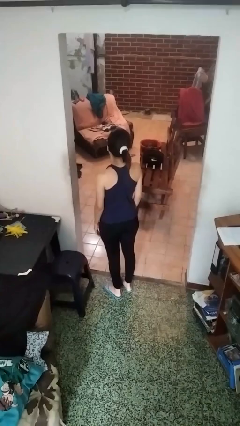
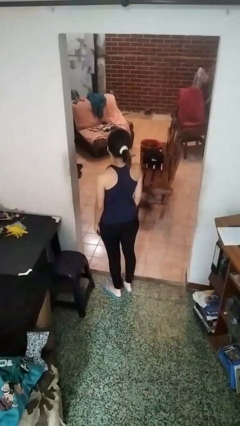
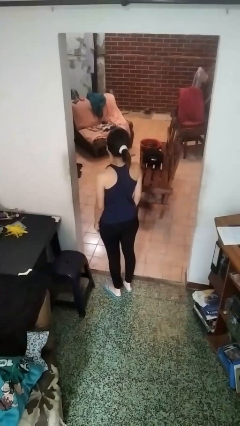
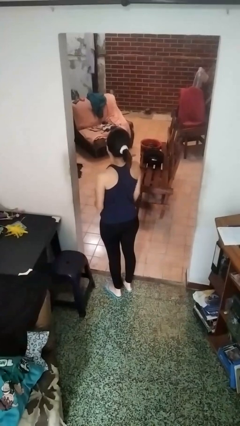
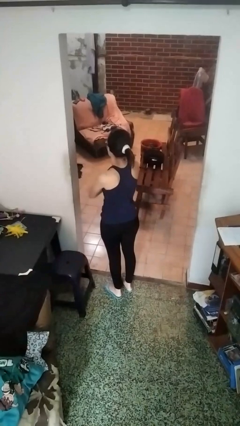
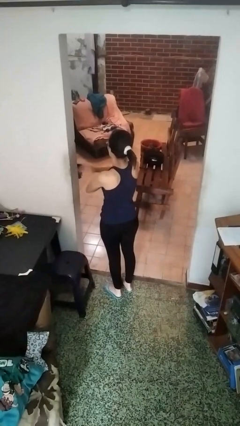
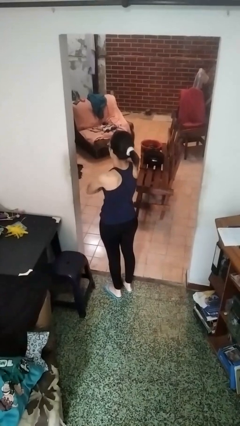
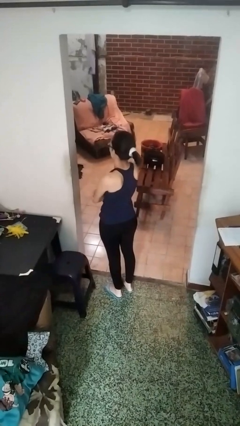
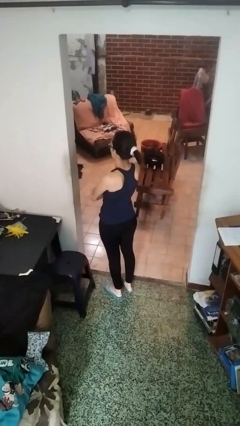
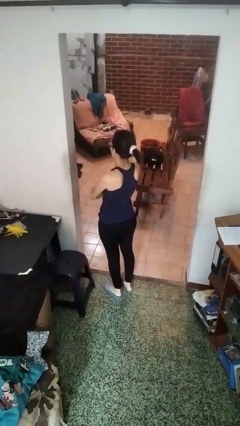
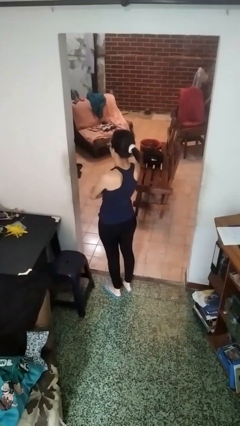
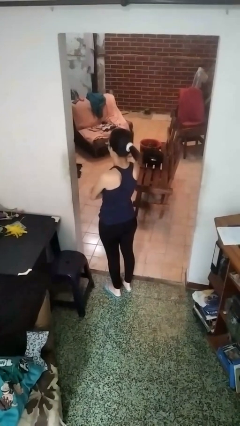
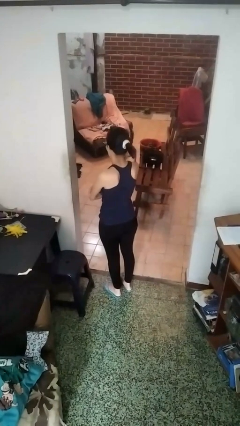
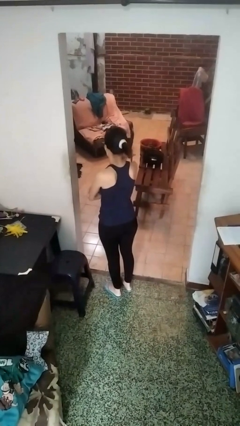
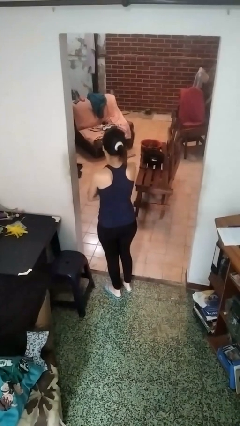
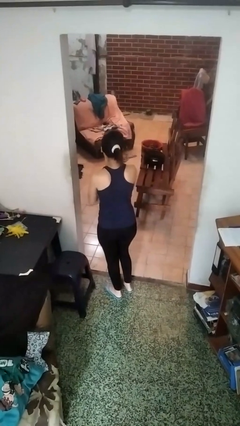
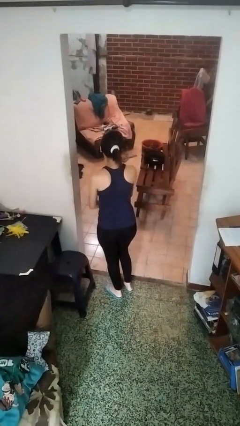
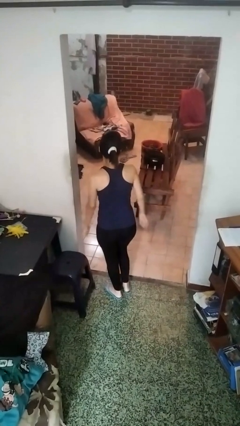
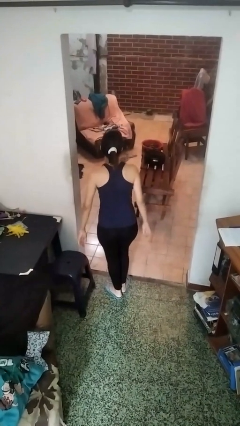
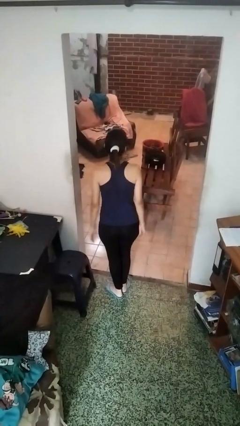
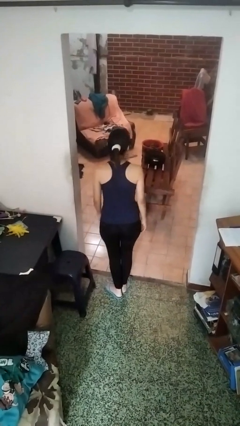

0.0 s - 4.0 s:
person gestures arms x

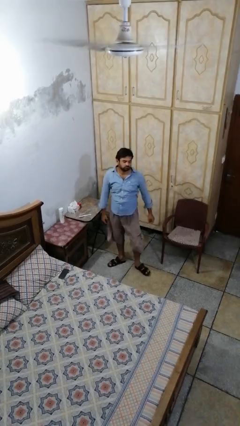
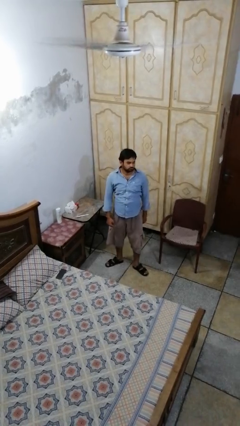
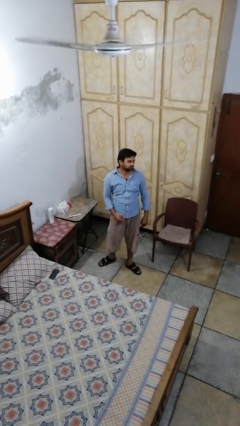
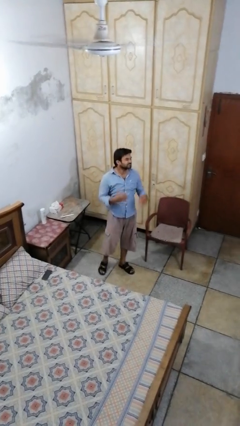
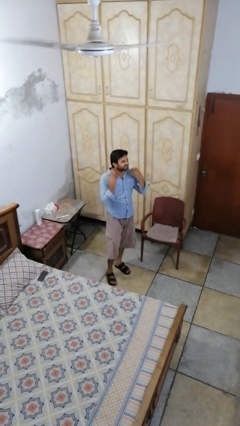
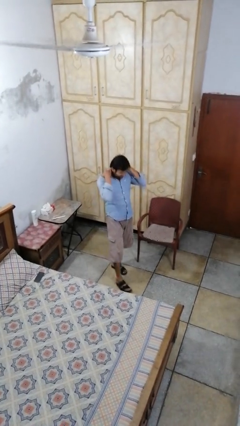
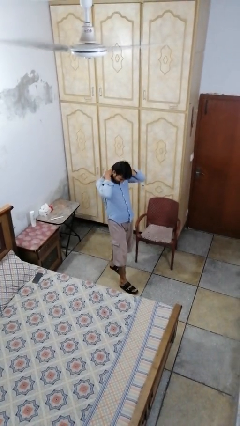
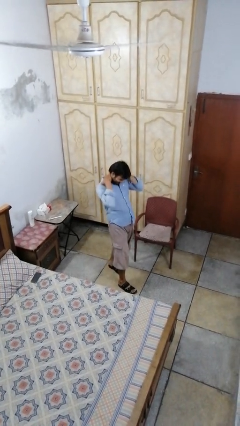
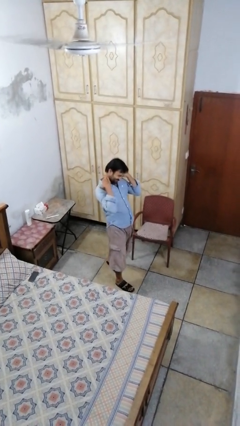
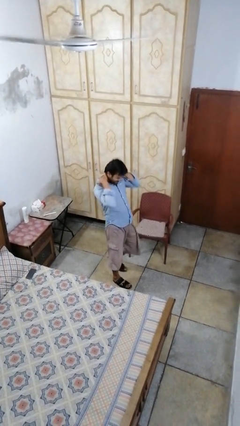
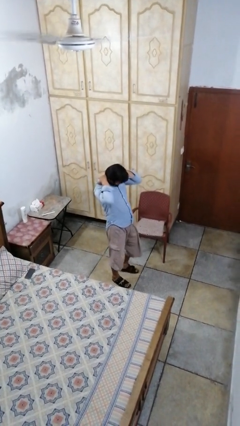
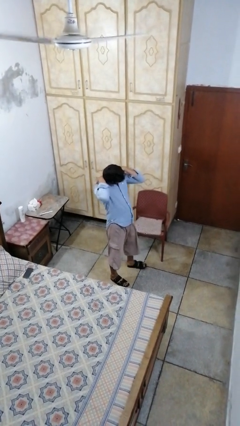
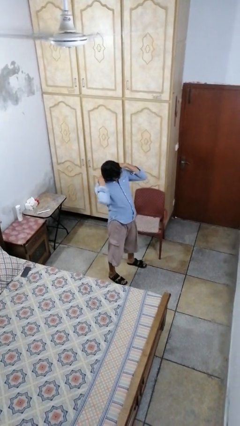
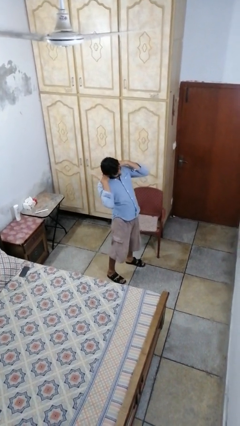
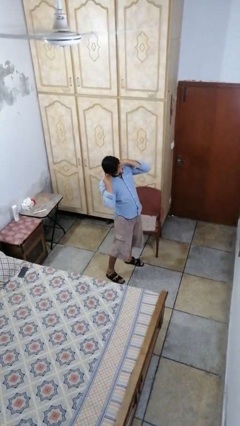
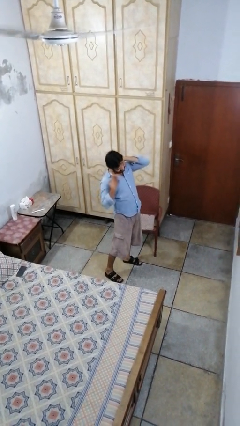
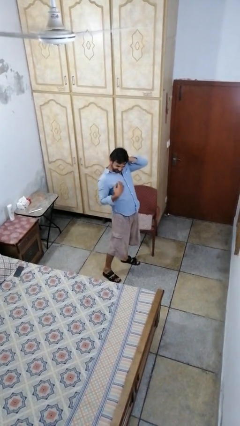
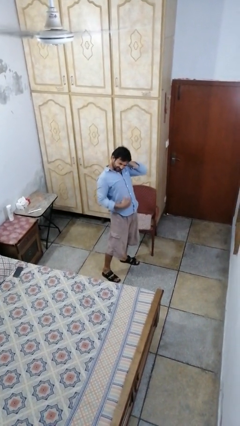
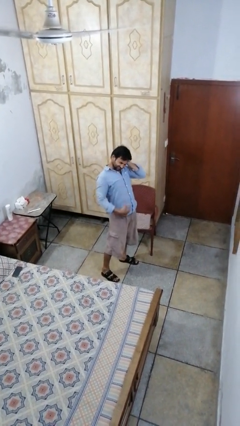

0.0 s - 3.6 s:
person rubs neck

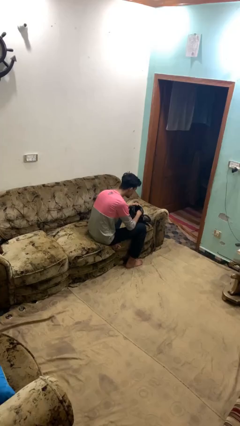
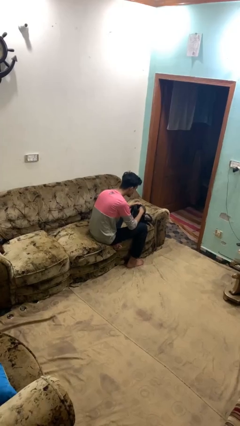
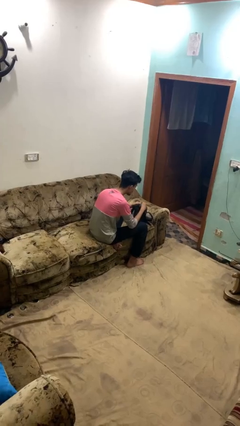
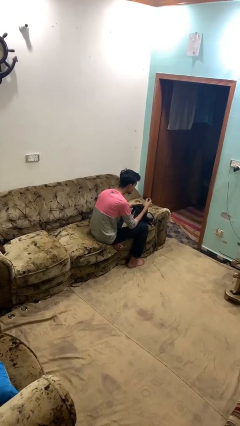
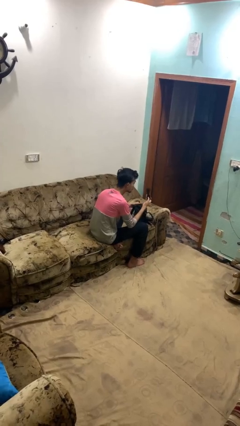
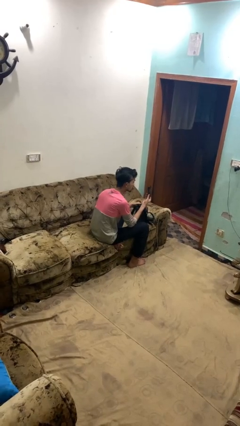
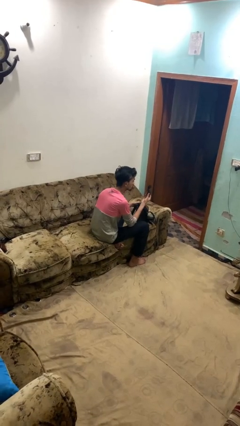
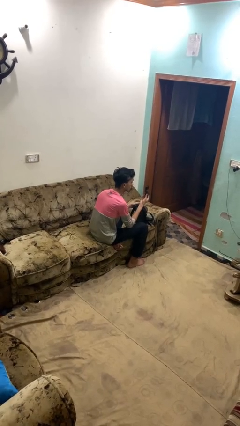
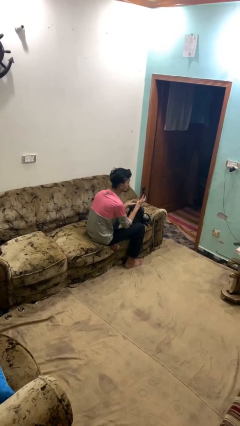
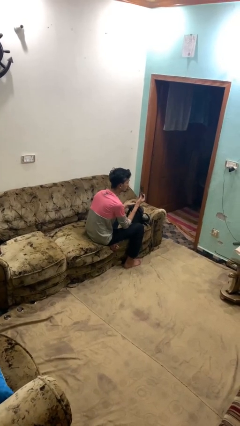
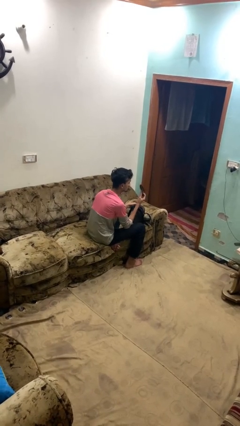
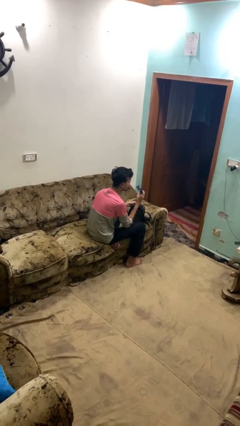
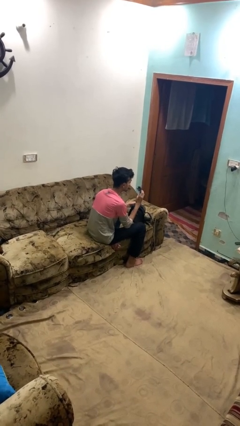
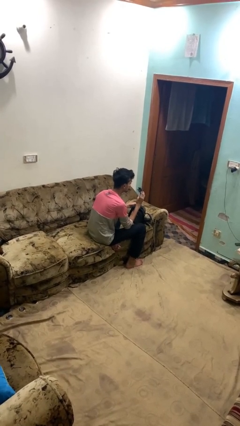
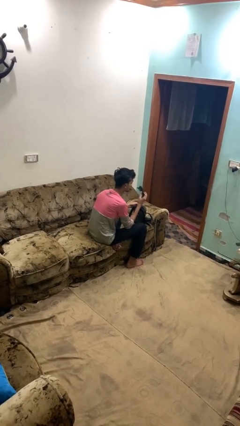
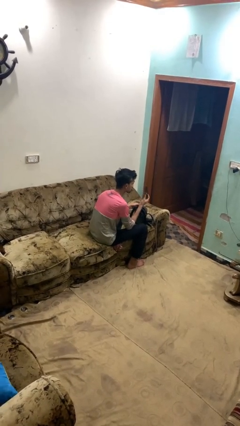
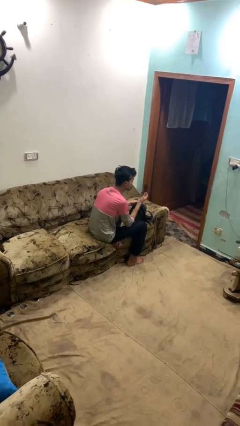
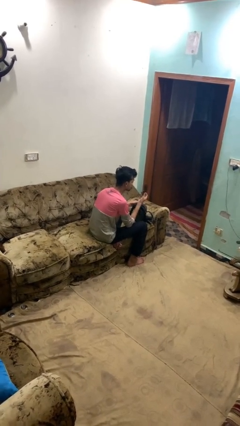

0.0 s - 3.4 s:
person takes object from backpack

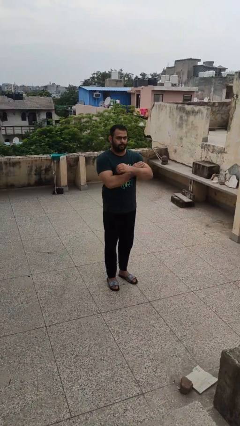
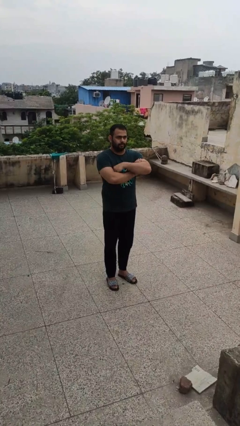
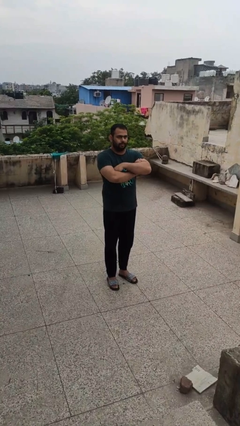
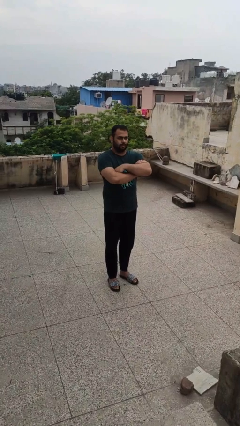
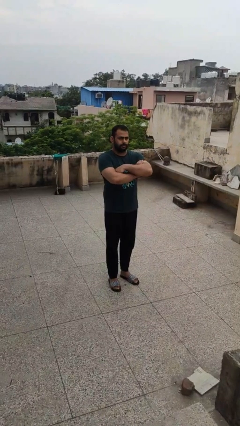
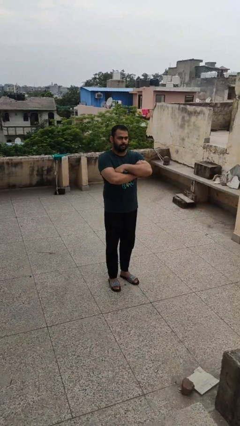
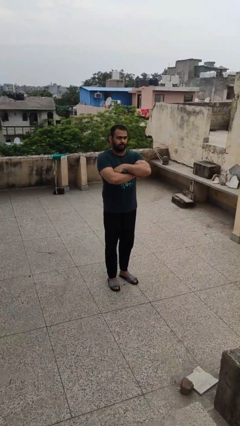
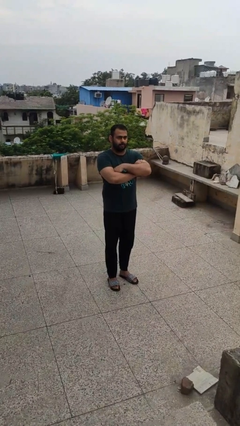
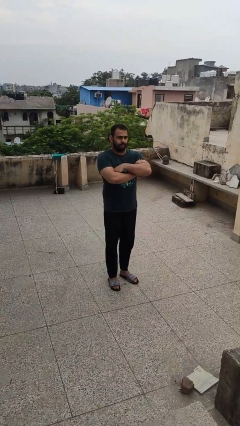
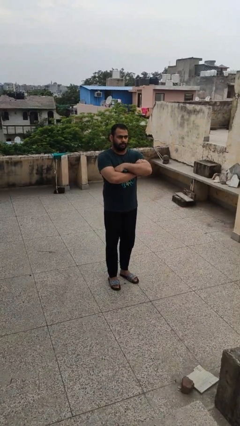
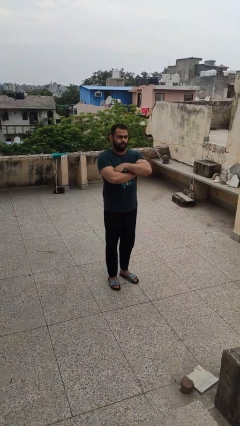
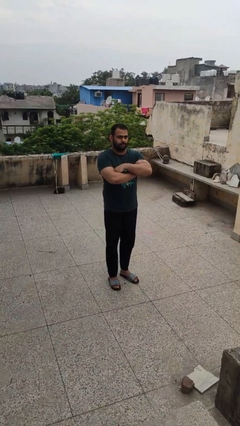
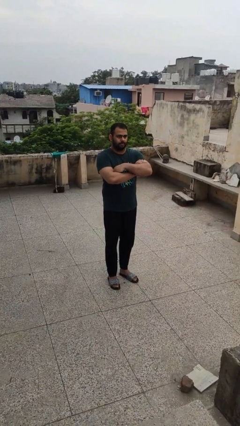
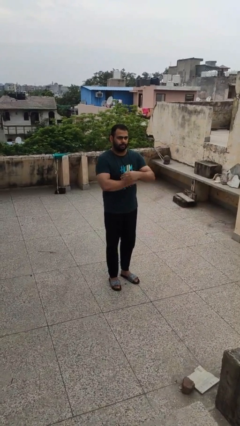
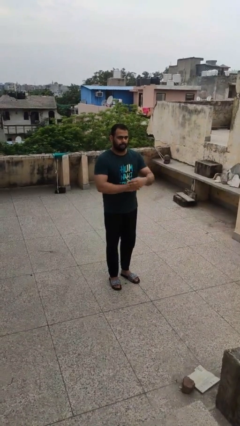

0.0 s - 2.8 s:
person crosses arms

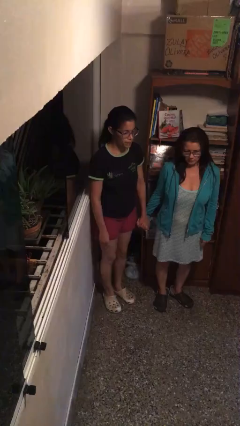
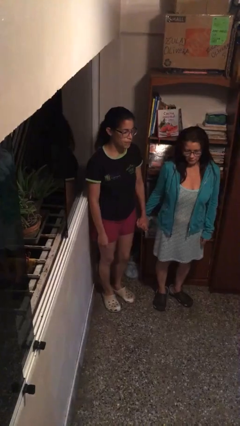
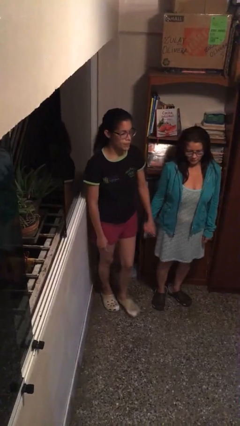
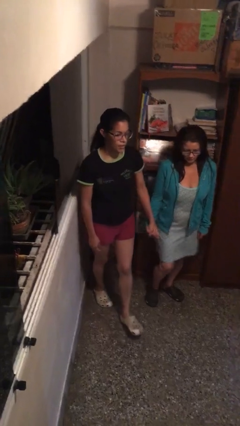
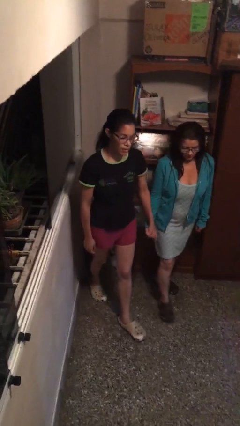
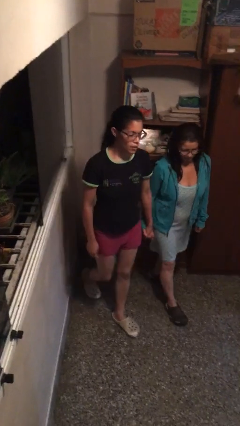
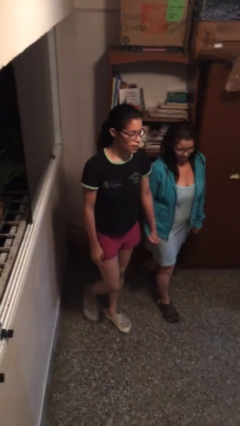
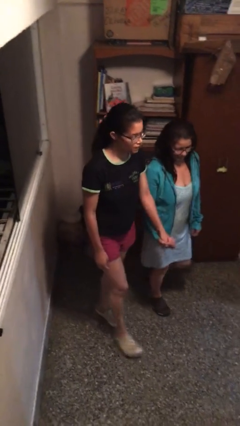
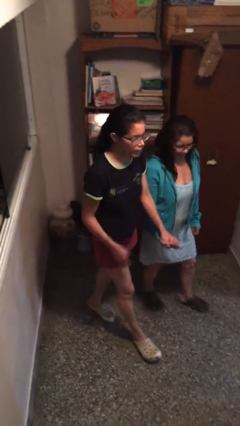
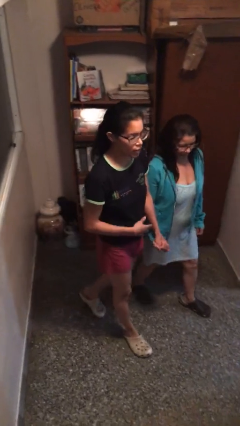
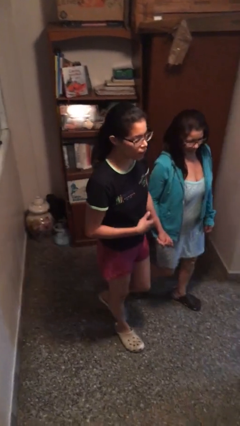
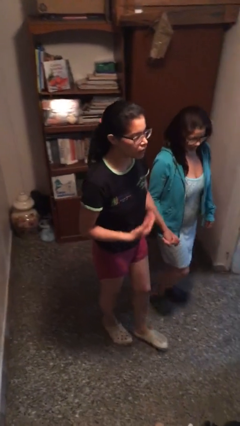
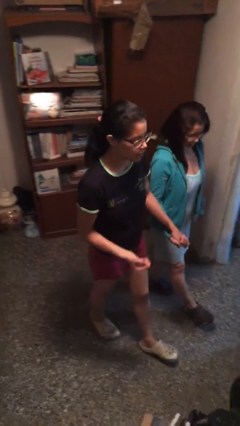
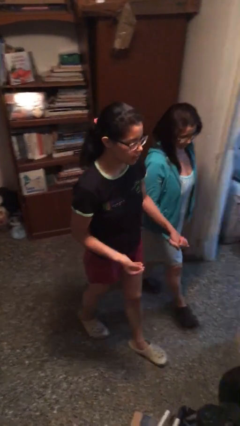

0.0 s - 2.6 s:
person holds hand

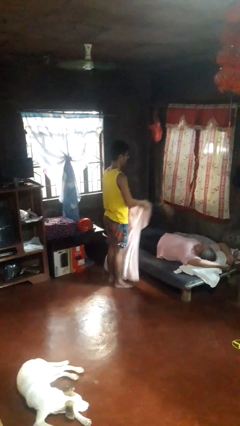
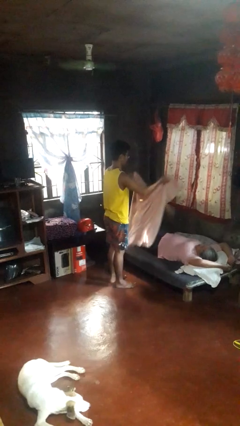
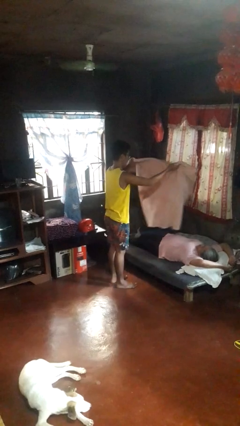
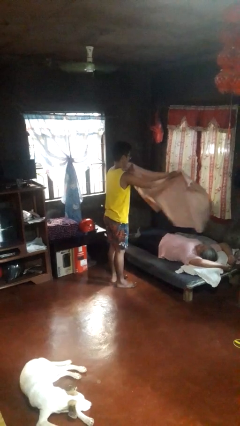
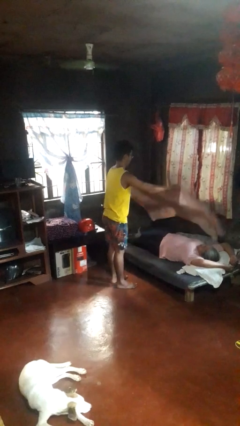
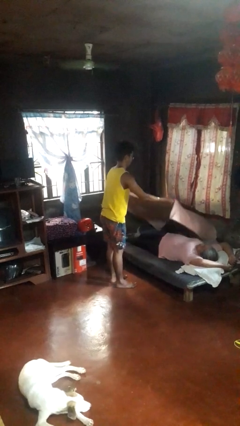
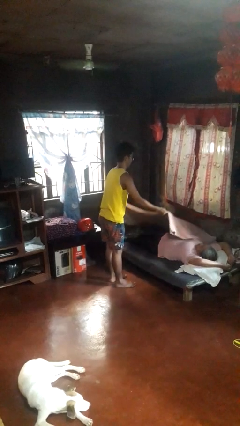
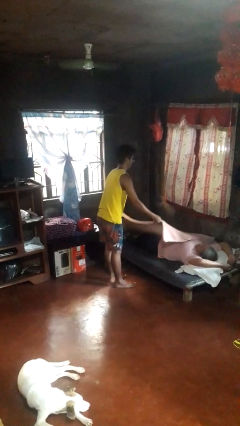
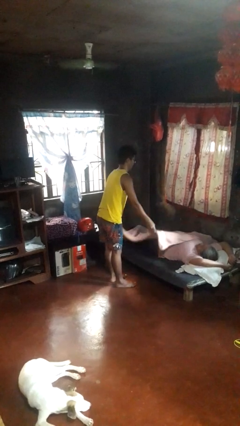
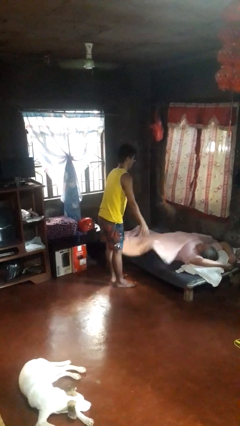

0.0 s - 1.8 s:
person covers friend with blanket
